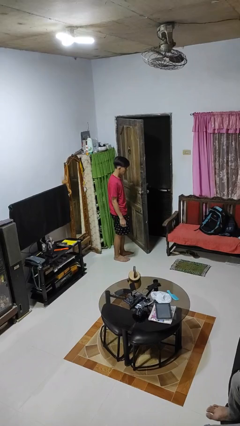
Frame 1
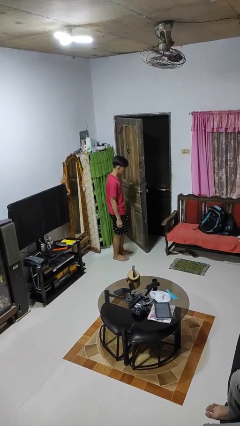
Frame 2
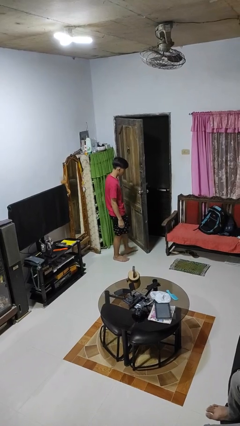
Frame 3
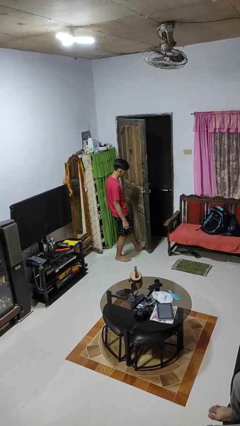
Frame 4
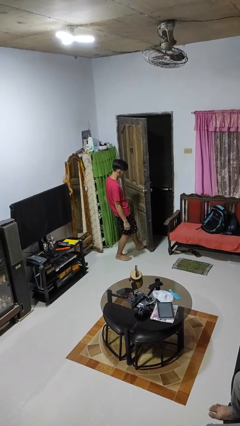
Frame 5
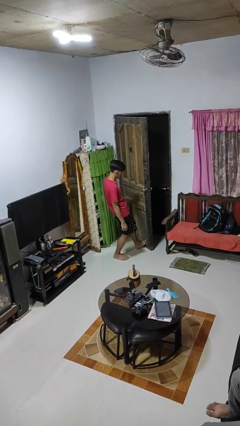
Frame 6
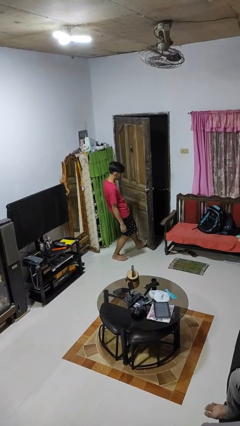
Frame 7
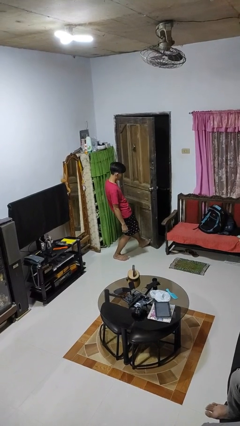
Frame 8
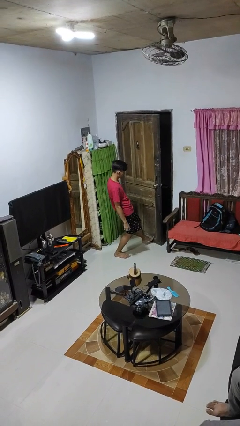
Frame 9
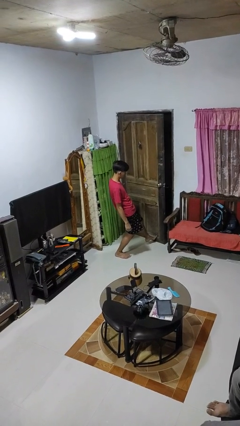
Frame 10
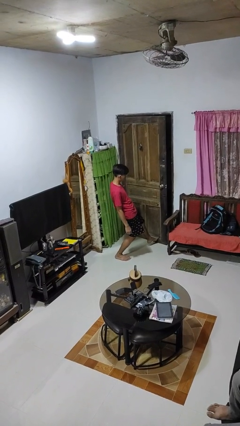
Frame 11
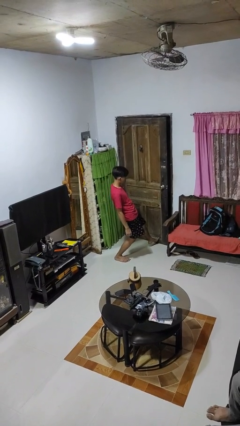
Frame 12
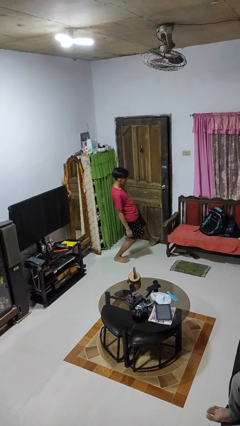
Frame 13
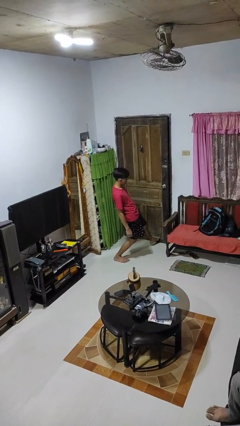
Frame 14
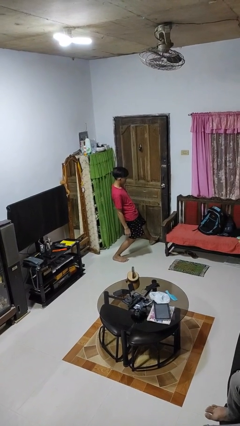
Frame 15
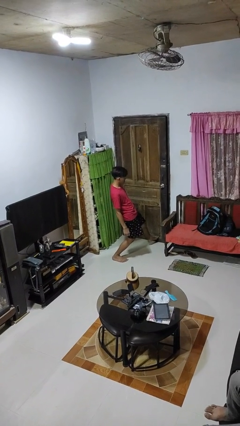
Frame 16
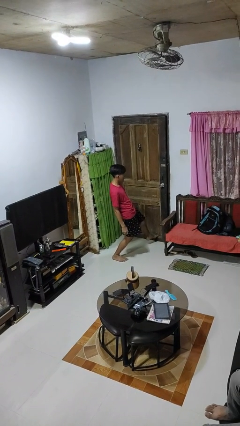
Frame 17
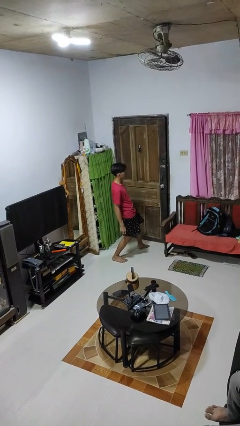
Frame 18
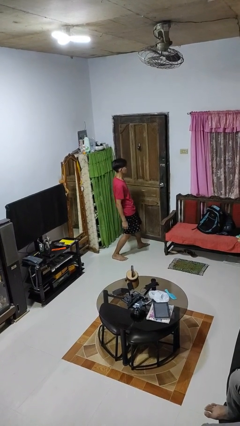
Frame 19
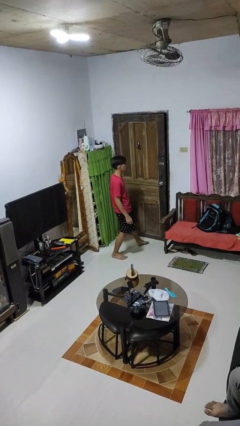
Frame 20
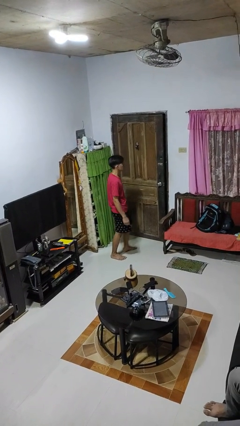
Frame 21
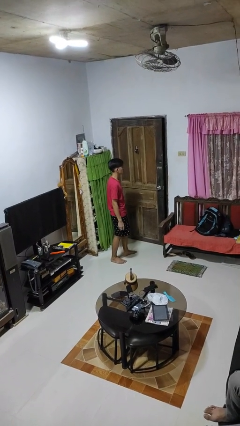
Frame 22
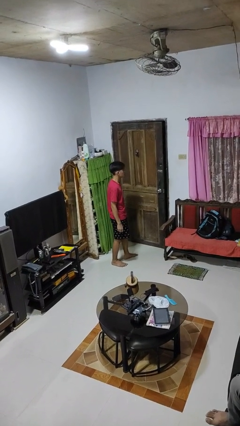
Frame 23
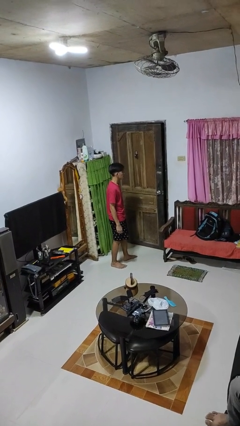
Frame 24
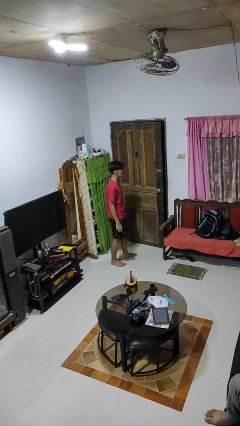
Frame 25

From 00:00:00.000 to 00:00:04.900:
person closes door with foot

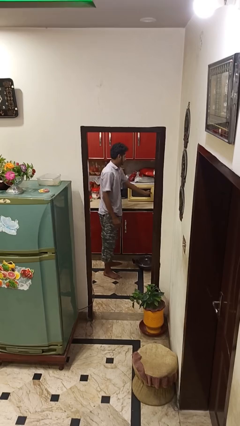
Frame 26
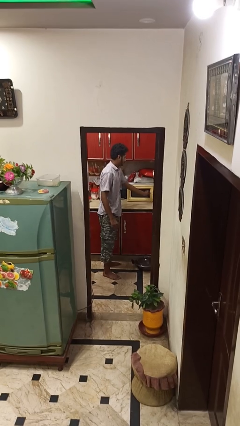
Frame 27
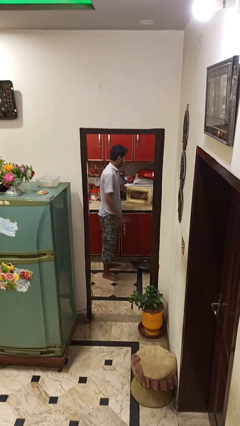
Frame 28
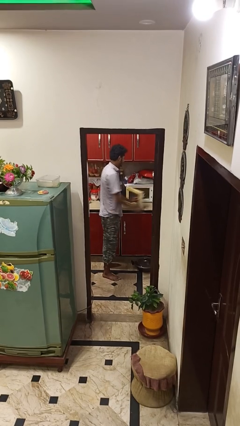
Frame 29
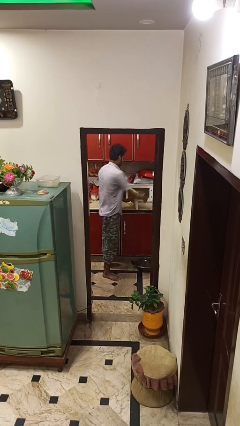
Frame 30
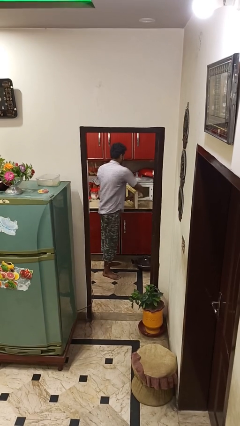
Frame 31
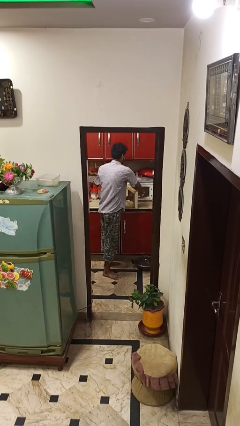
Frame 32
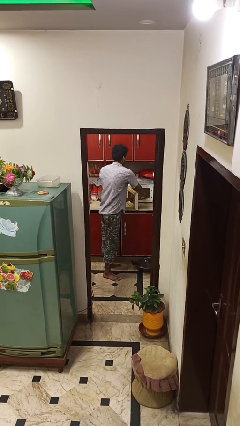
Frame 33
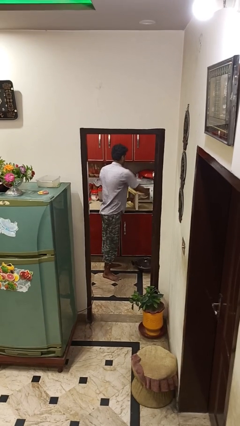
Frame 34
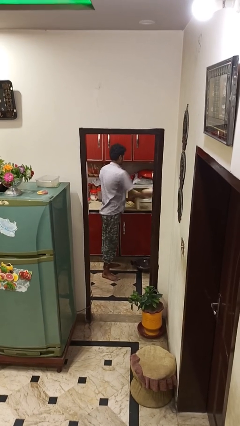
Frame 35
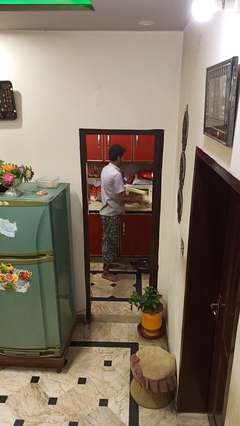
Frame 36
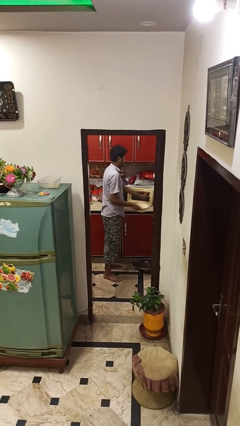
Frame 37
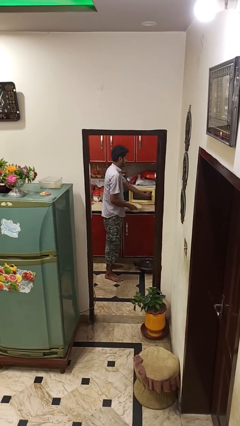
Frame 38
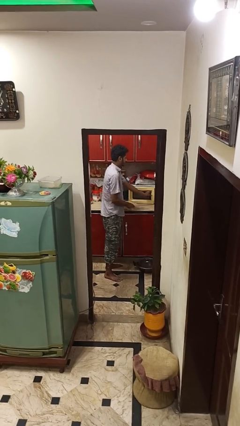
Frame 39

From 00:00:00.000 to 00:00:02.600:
person takes object from microwave

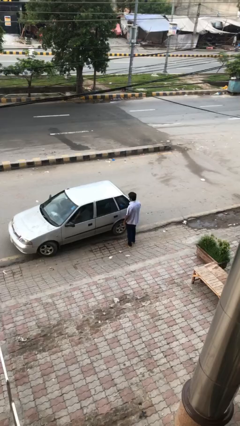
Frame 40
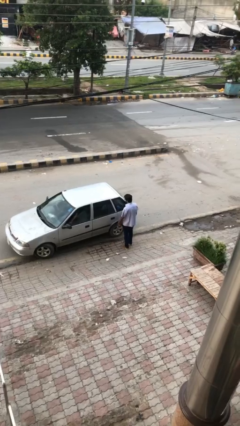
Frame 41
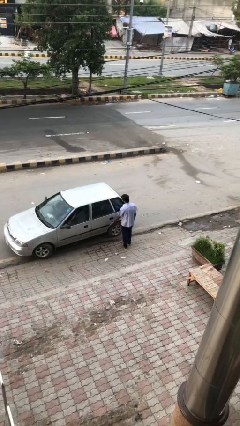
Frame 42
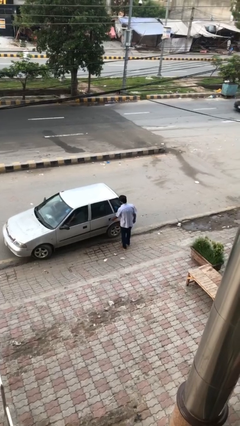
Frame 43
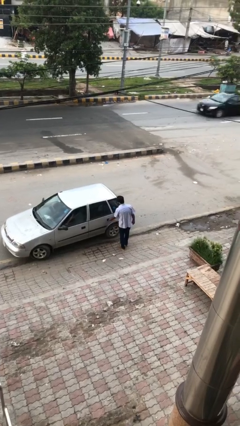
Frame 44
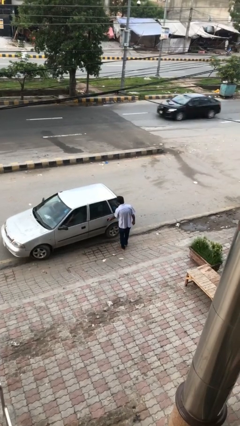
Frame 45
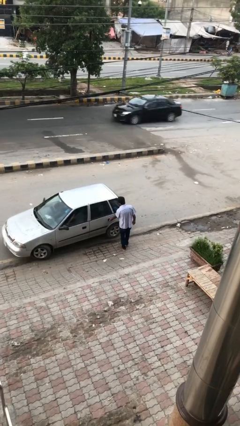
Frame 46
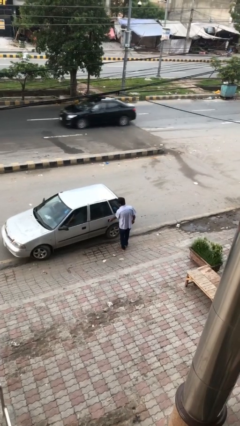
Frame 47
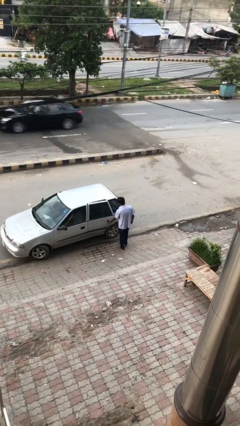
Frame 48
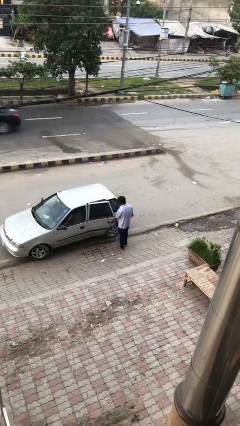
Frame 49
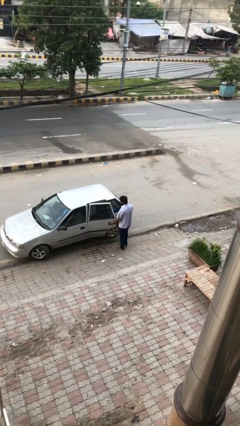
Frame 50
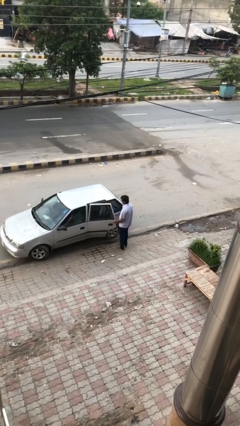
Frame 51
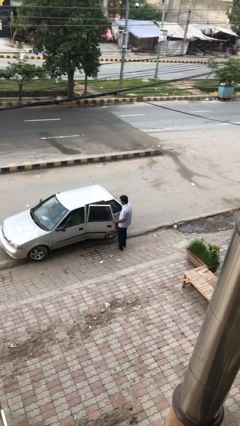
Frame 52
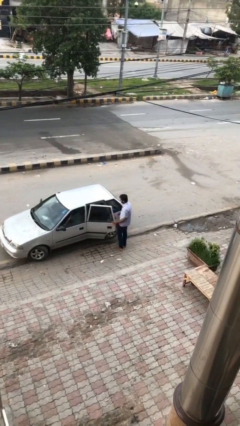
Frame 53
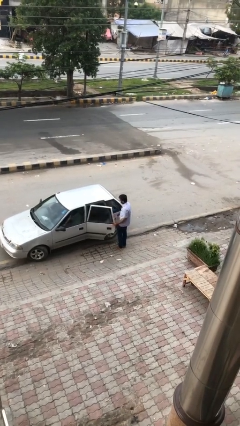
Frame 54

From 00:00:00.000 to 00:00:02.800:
person opens car door

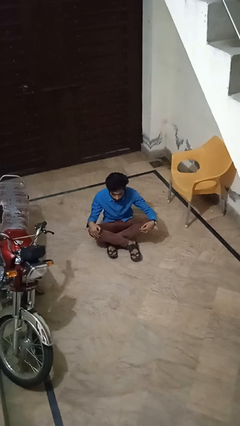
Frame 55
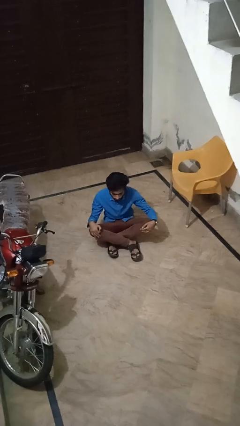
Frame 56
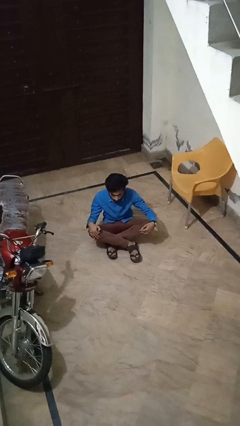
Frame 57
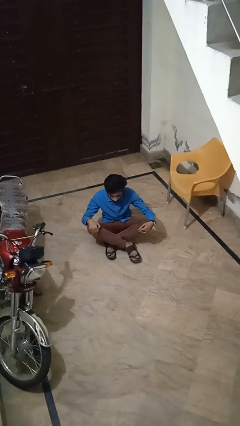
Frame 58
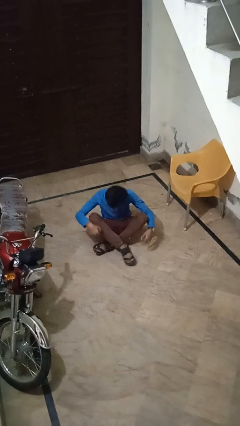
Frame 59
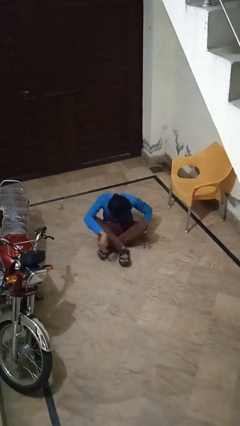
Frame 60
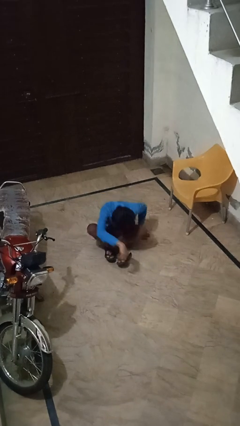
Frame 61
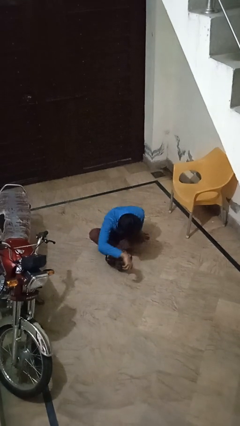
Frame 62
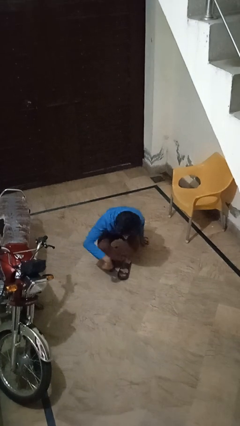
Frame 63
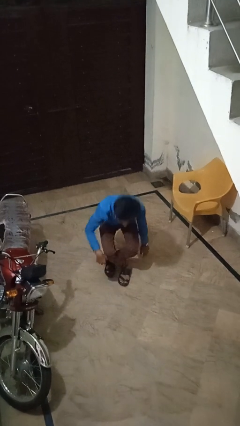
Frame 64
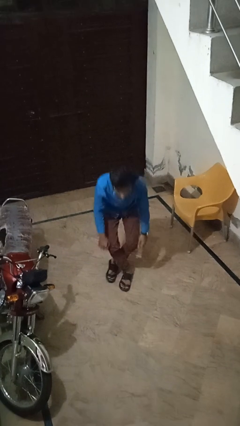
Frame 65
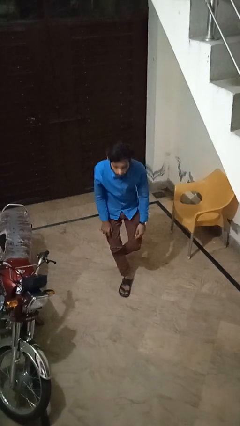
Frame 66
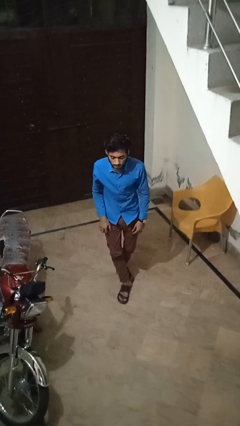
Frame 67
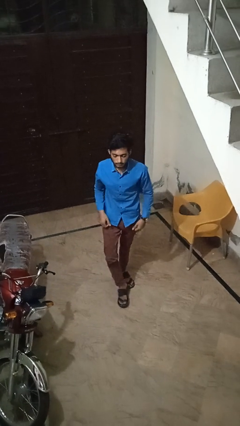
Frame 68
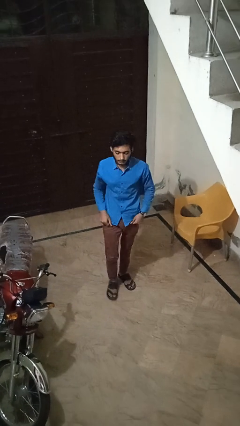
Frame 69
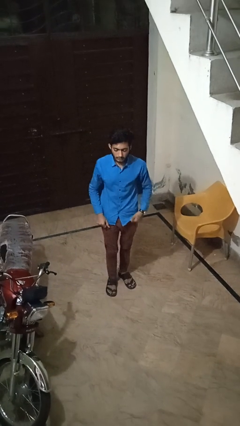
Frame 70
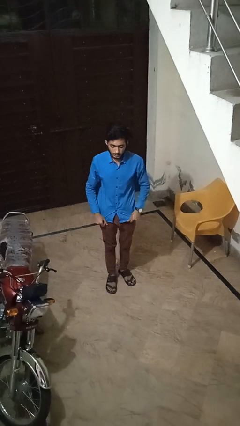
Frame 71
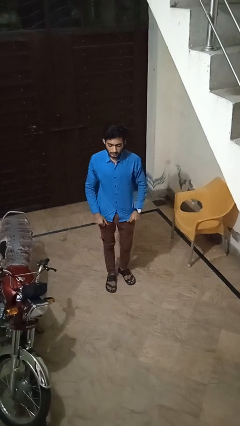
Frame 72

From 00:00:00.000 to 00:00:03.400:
person stands up from floor

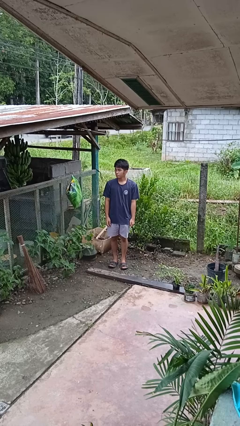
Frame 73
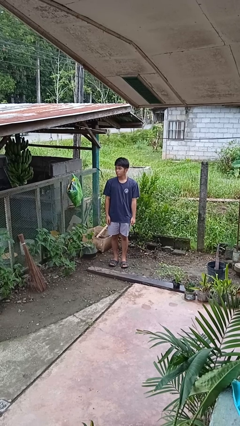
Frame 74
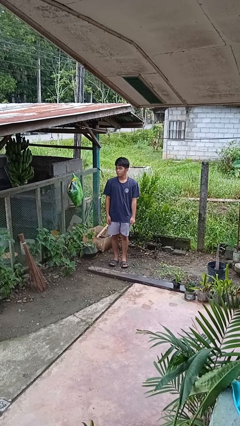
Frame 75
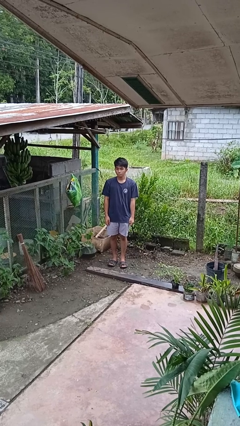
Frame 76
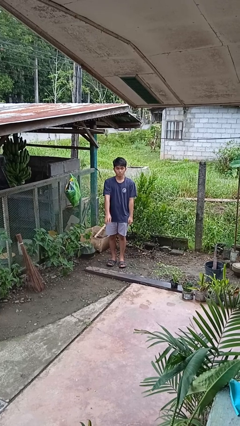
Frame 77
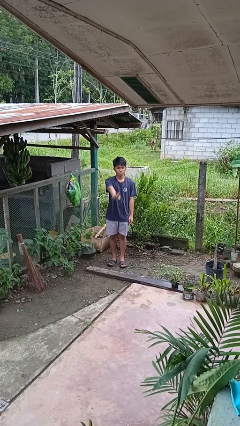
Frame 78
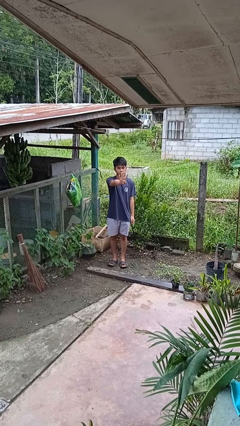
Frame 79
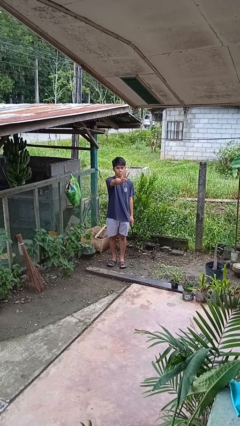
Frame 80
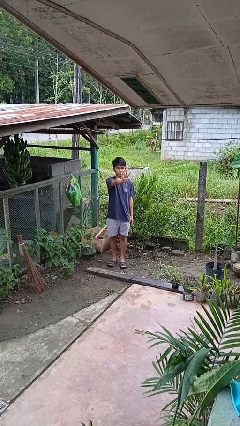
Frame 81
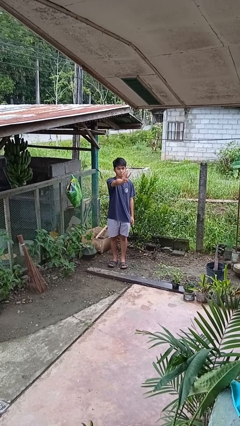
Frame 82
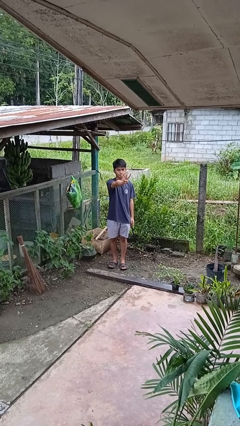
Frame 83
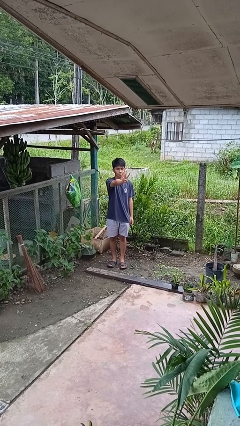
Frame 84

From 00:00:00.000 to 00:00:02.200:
person gestures number four

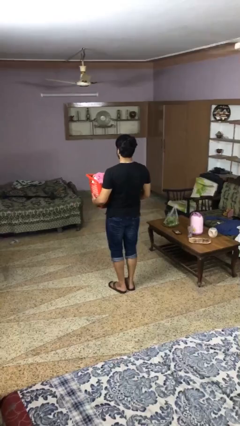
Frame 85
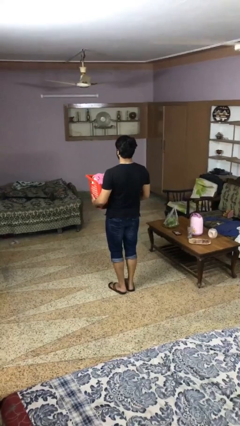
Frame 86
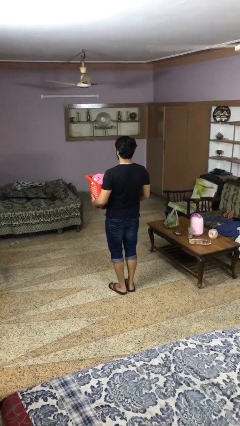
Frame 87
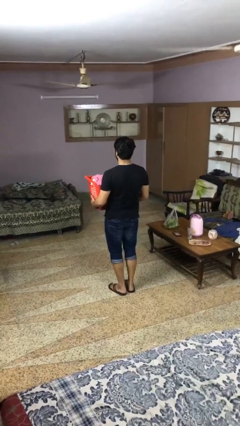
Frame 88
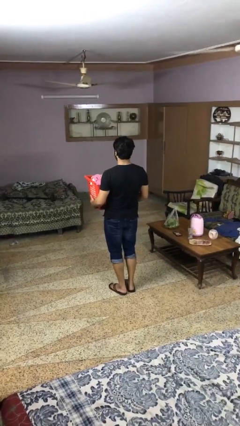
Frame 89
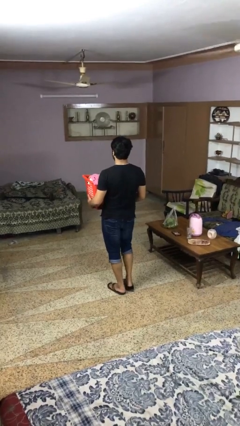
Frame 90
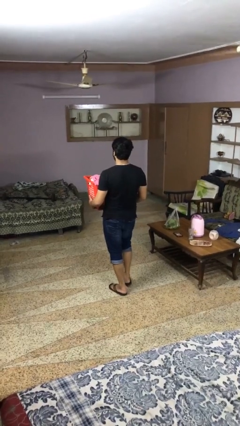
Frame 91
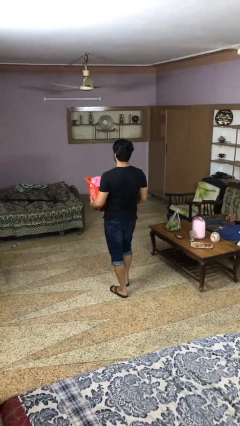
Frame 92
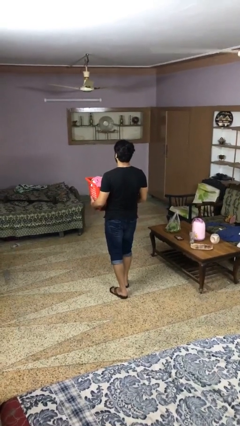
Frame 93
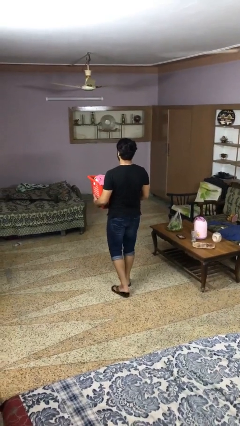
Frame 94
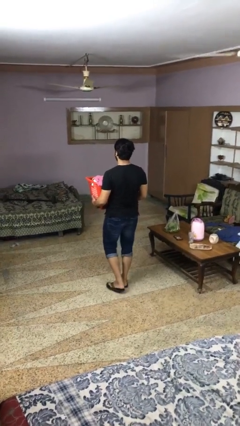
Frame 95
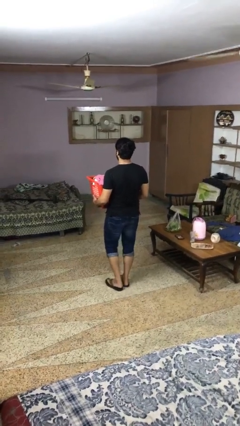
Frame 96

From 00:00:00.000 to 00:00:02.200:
person carries laundry basket
